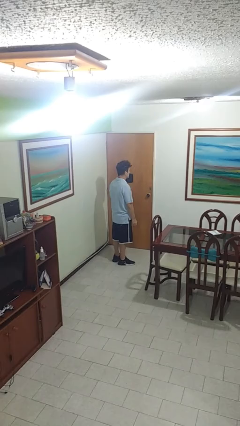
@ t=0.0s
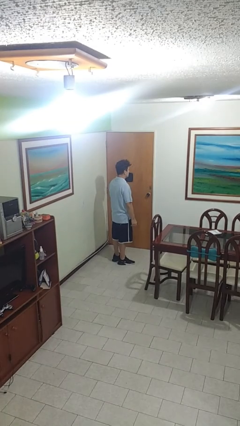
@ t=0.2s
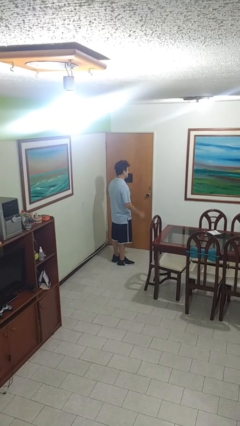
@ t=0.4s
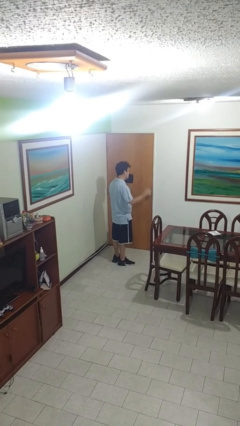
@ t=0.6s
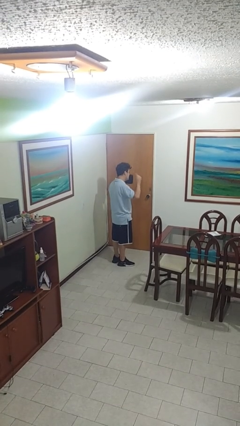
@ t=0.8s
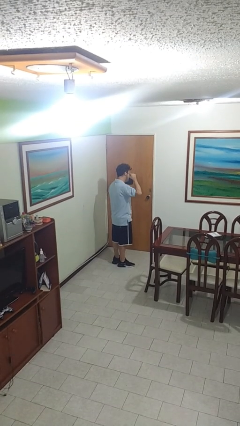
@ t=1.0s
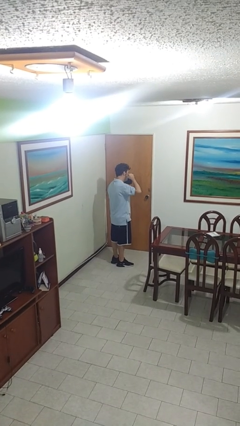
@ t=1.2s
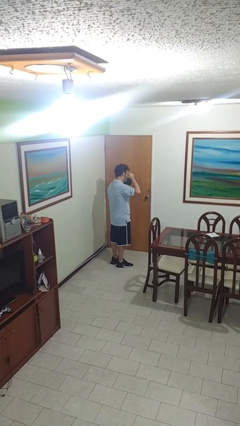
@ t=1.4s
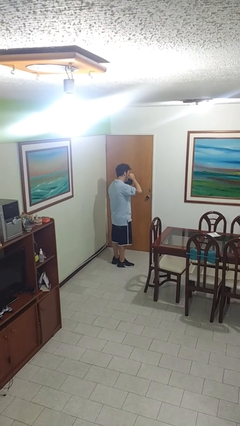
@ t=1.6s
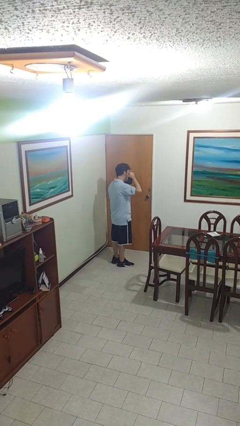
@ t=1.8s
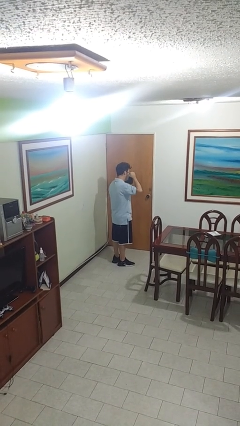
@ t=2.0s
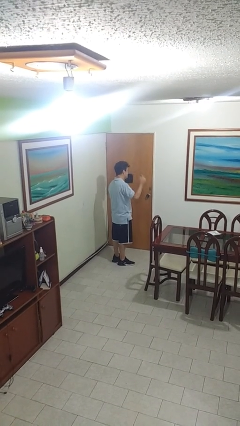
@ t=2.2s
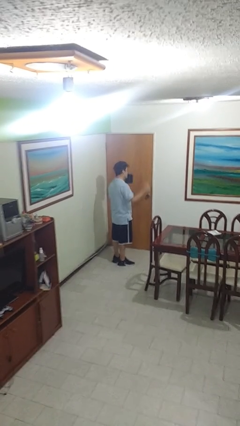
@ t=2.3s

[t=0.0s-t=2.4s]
person gestures listen closely

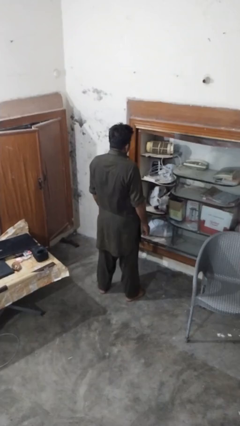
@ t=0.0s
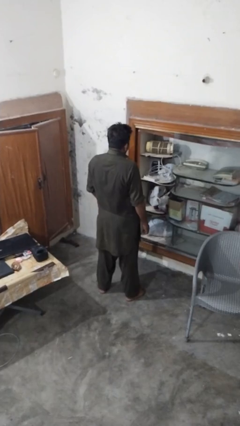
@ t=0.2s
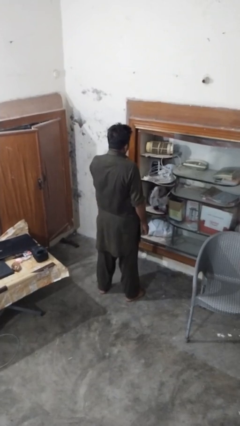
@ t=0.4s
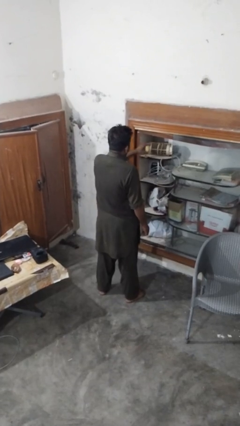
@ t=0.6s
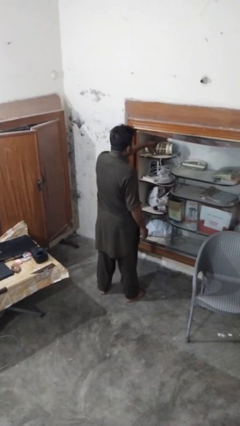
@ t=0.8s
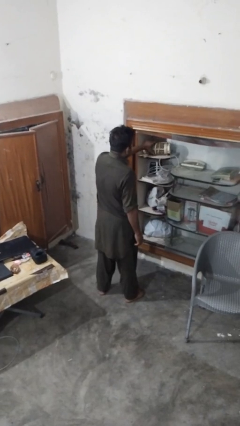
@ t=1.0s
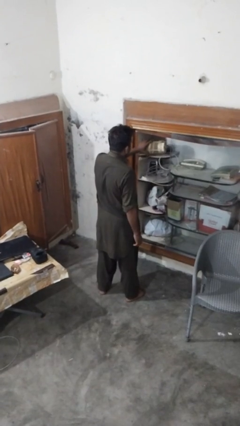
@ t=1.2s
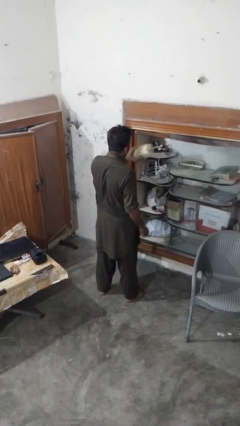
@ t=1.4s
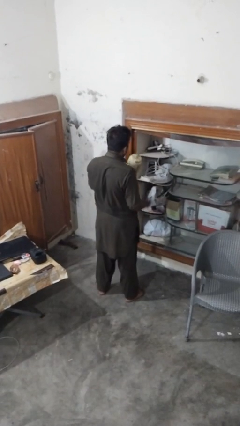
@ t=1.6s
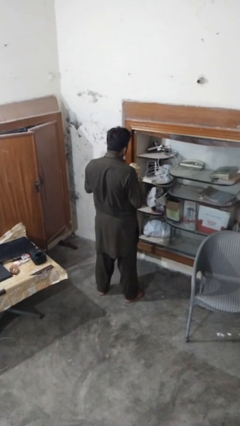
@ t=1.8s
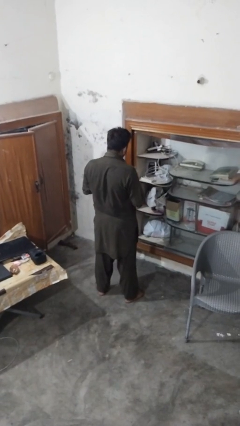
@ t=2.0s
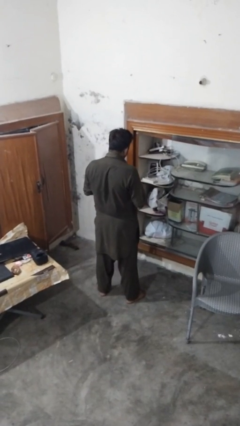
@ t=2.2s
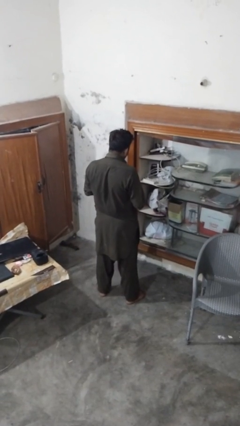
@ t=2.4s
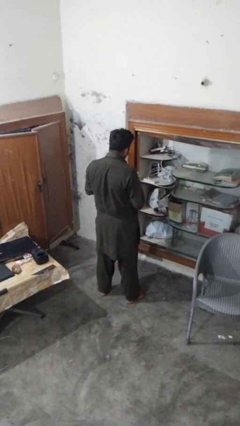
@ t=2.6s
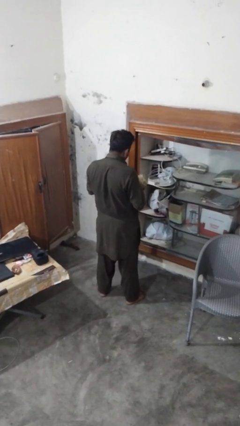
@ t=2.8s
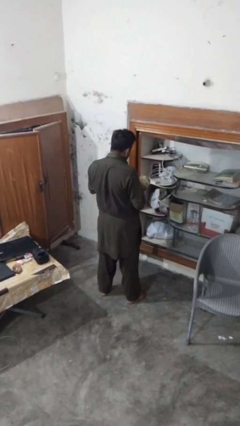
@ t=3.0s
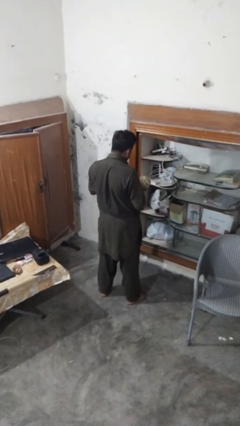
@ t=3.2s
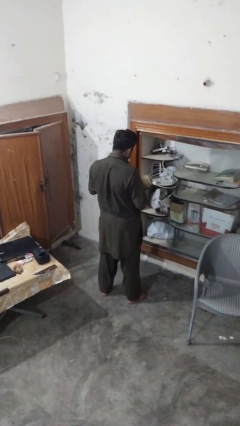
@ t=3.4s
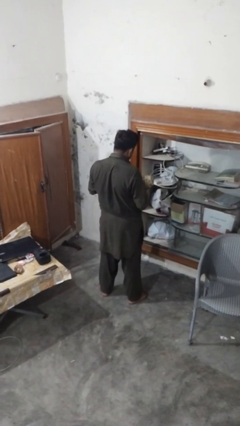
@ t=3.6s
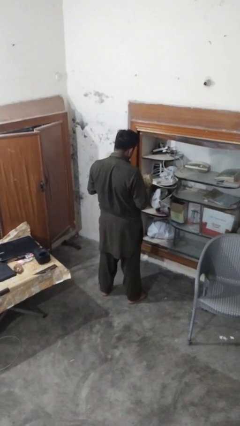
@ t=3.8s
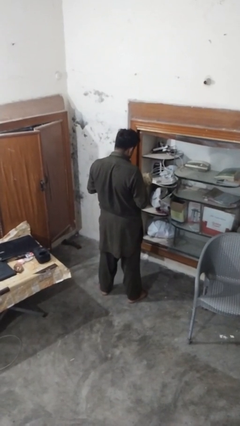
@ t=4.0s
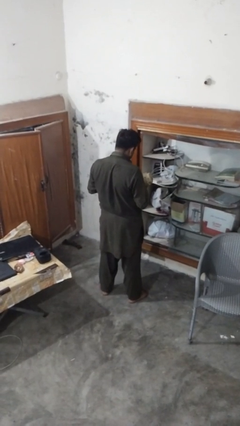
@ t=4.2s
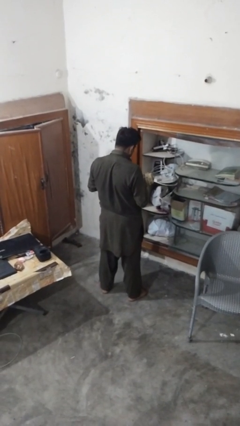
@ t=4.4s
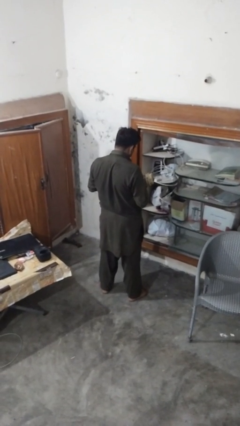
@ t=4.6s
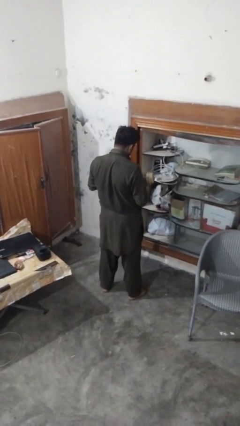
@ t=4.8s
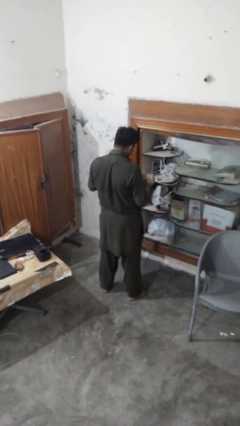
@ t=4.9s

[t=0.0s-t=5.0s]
person picks up object from countertop

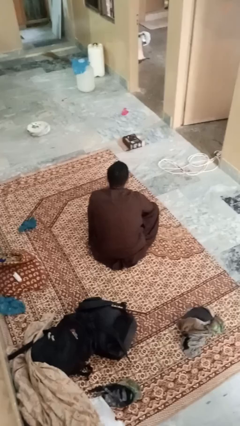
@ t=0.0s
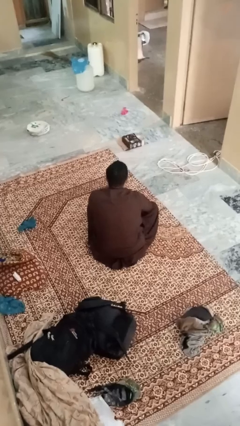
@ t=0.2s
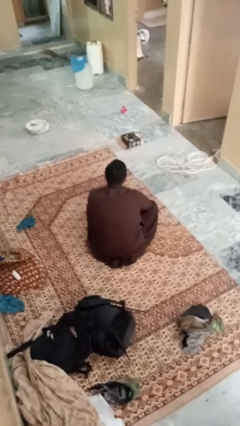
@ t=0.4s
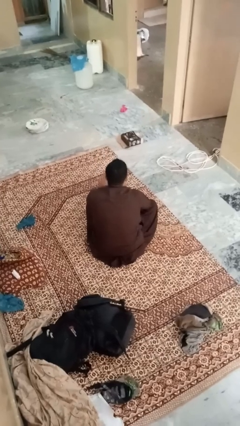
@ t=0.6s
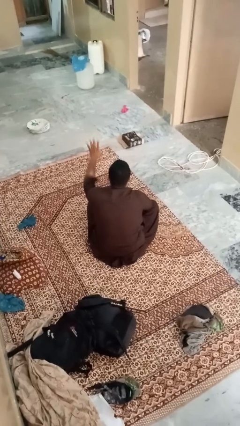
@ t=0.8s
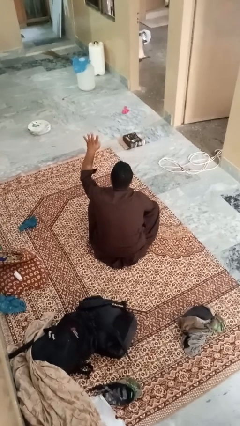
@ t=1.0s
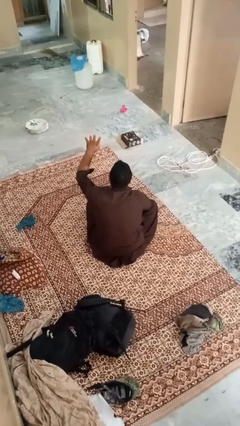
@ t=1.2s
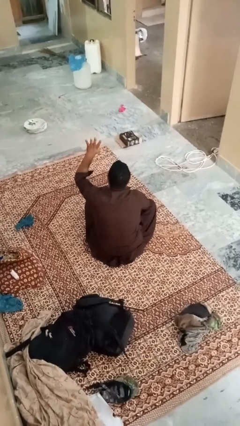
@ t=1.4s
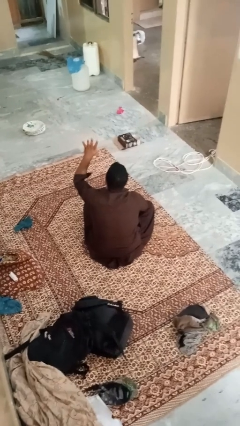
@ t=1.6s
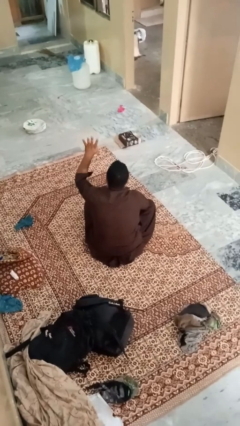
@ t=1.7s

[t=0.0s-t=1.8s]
person gestures number four

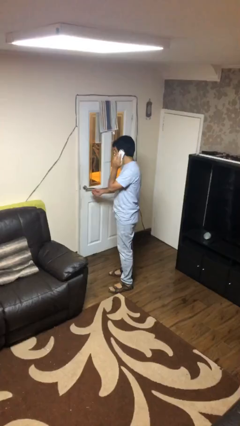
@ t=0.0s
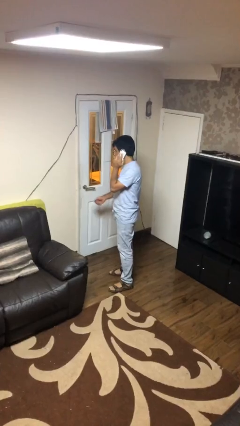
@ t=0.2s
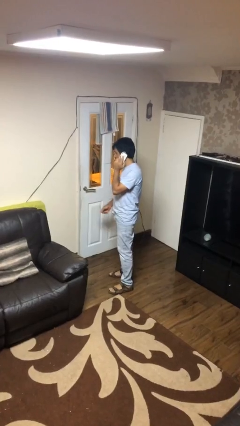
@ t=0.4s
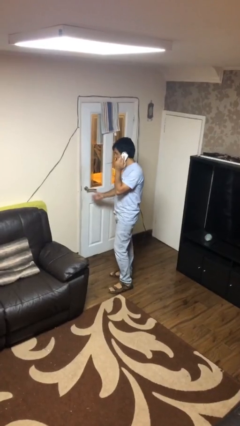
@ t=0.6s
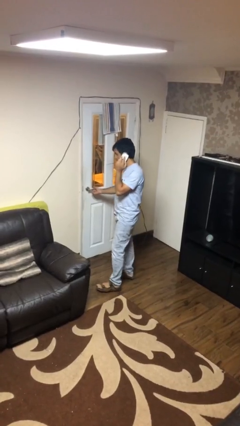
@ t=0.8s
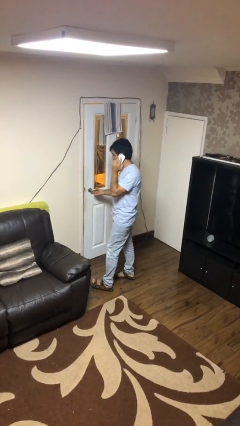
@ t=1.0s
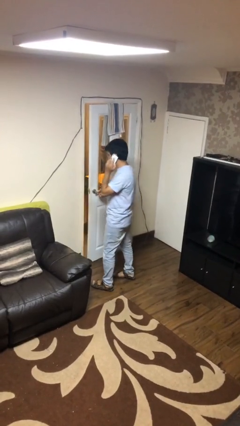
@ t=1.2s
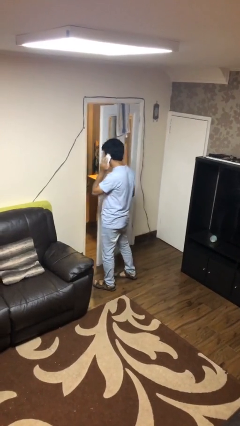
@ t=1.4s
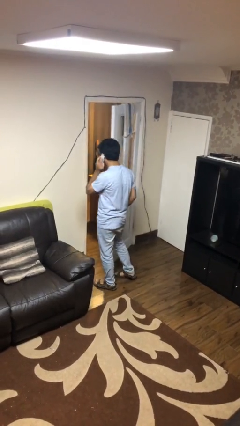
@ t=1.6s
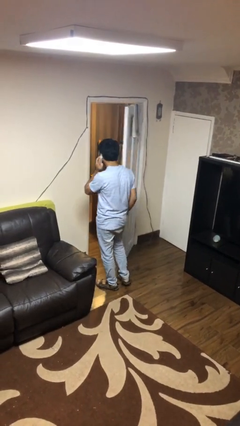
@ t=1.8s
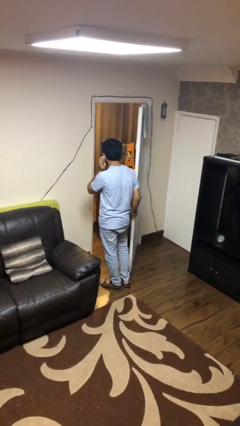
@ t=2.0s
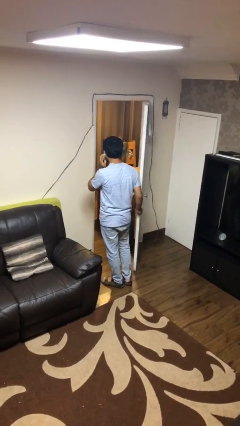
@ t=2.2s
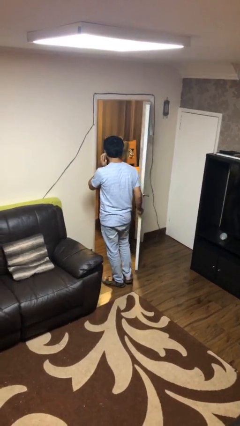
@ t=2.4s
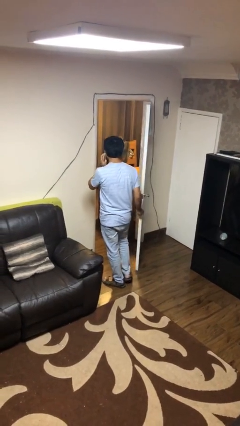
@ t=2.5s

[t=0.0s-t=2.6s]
person opens facility door

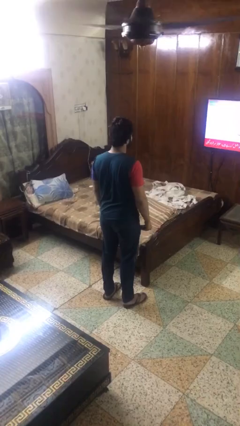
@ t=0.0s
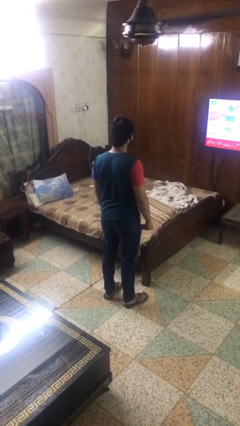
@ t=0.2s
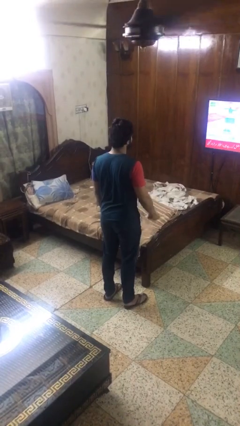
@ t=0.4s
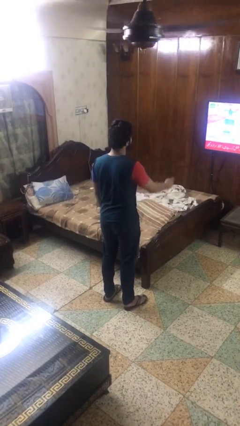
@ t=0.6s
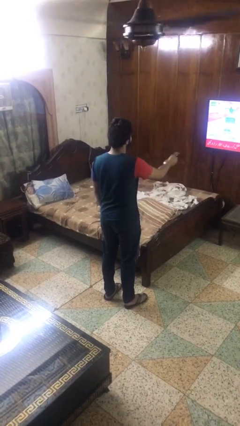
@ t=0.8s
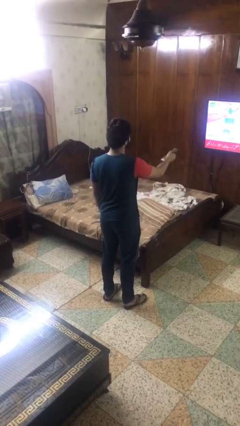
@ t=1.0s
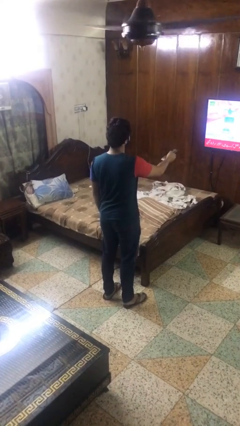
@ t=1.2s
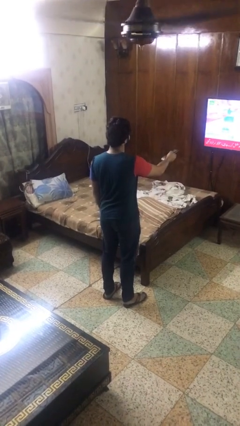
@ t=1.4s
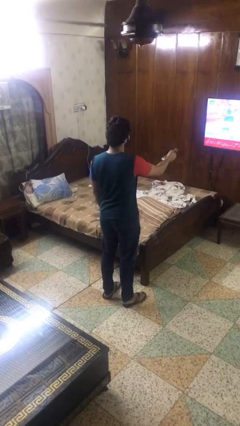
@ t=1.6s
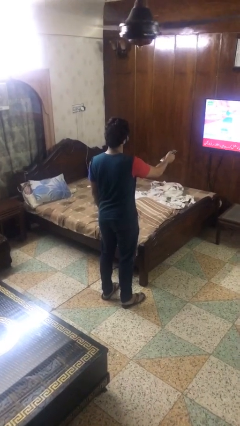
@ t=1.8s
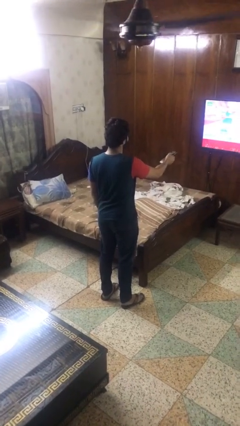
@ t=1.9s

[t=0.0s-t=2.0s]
person uses television remote

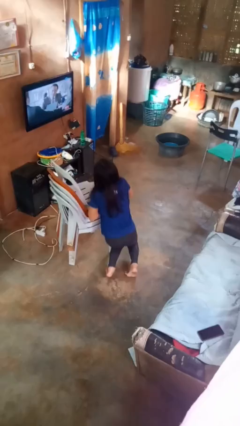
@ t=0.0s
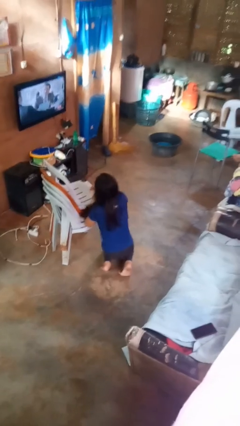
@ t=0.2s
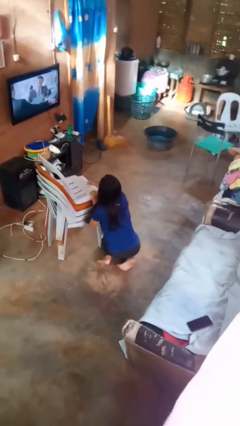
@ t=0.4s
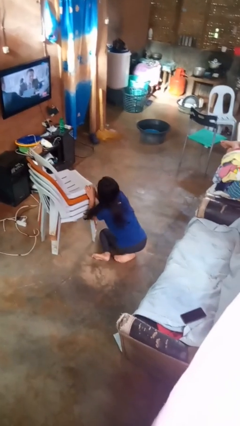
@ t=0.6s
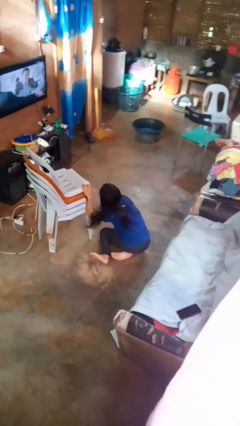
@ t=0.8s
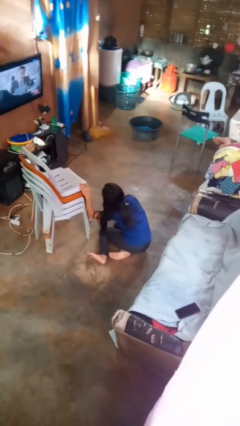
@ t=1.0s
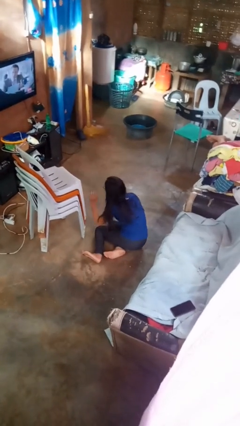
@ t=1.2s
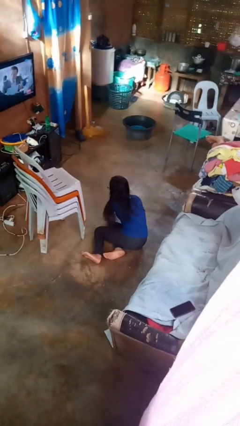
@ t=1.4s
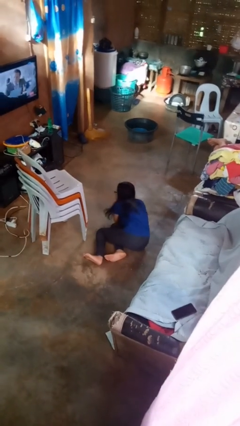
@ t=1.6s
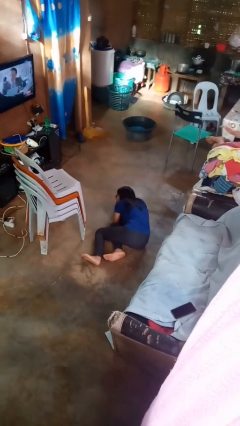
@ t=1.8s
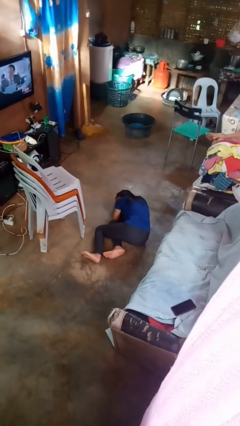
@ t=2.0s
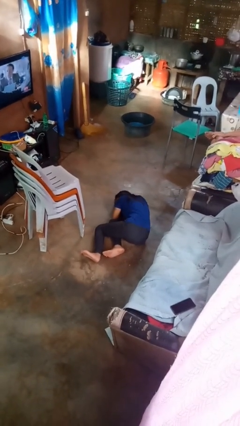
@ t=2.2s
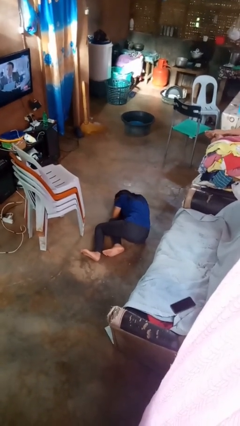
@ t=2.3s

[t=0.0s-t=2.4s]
person lies down on floor

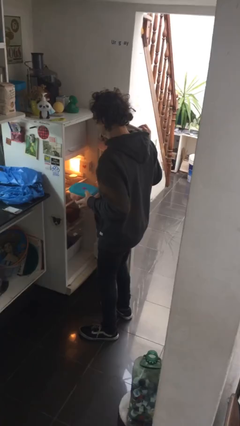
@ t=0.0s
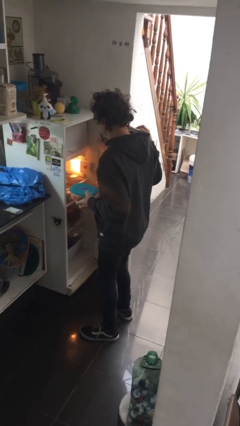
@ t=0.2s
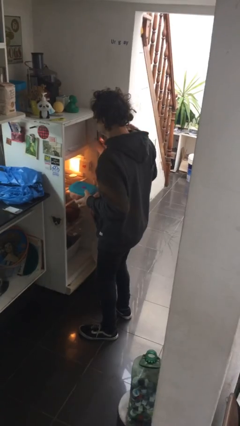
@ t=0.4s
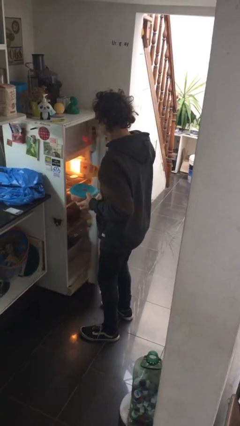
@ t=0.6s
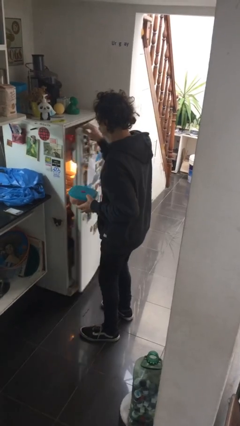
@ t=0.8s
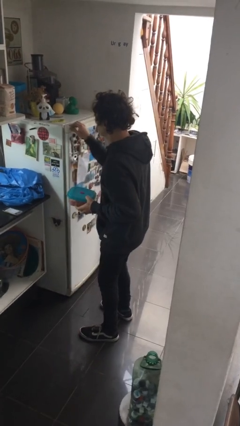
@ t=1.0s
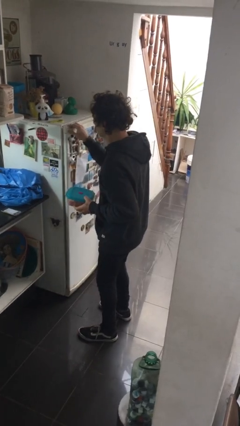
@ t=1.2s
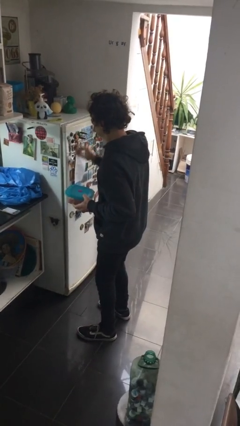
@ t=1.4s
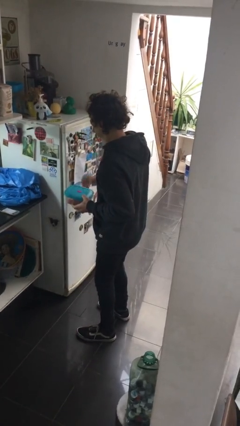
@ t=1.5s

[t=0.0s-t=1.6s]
person closes refrigerator
